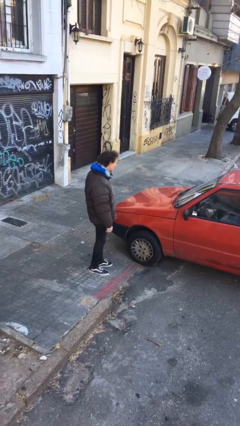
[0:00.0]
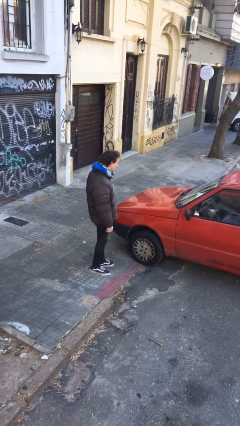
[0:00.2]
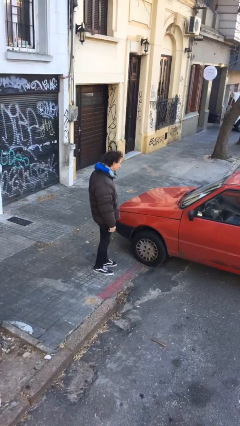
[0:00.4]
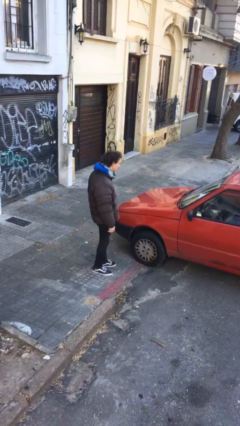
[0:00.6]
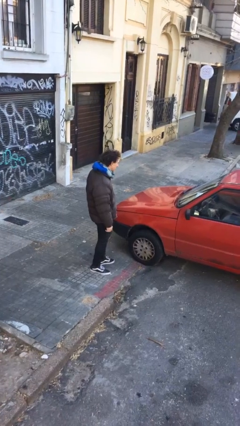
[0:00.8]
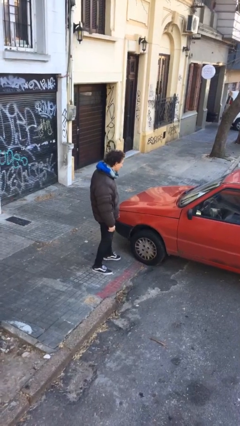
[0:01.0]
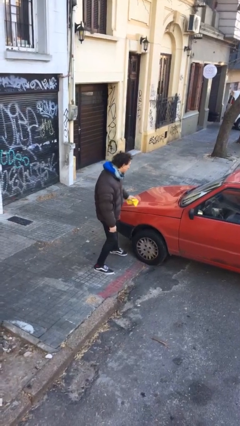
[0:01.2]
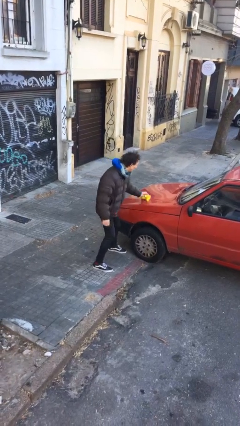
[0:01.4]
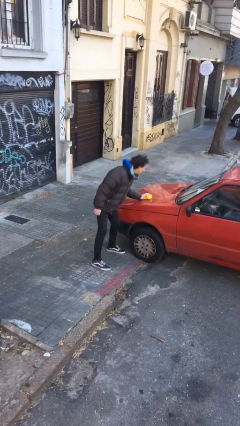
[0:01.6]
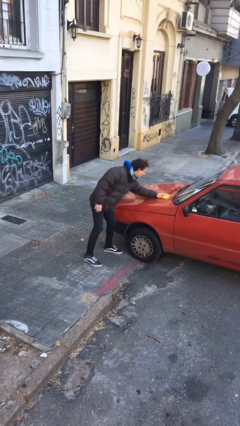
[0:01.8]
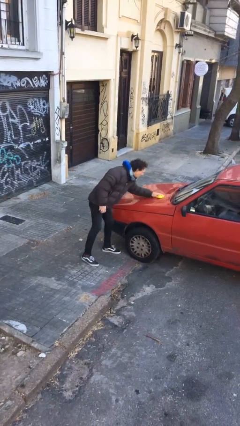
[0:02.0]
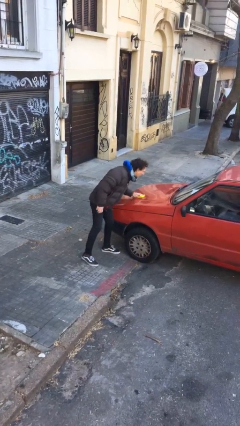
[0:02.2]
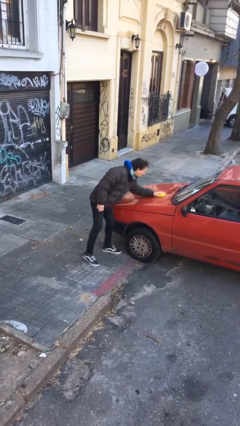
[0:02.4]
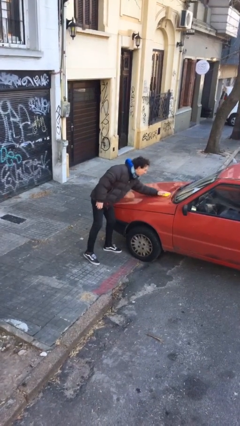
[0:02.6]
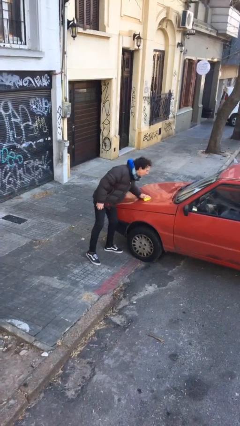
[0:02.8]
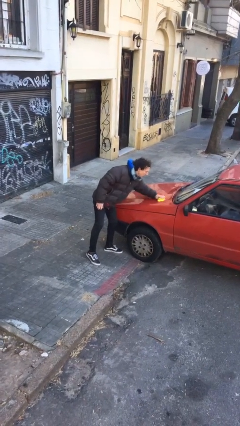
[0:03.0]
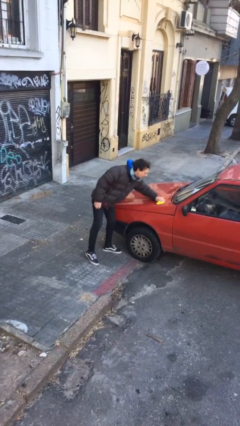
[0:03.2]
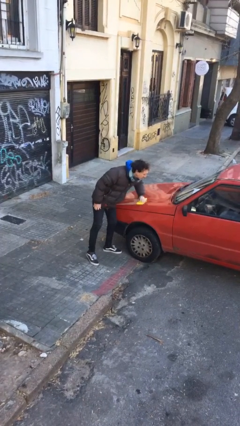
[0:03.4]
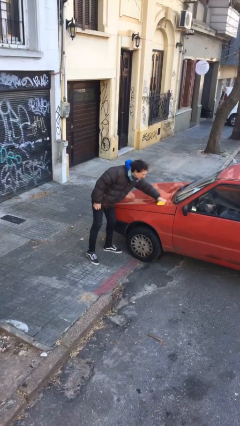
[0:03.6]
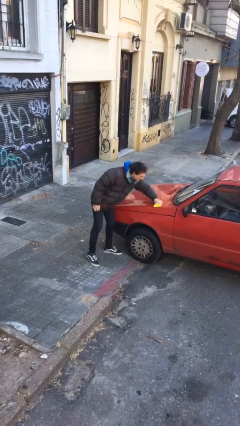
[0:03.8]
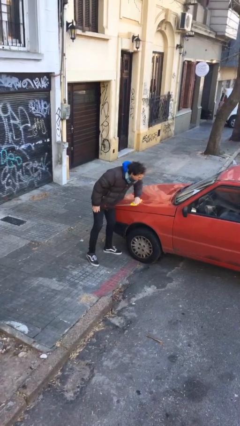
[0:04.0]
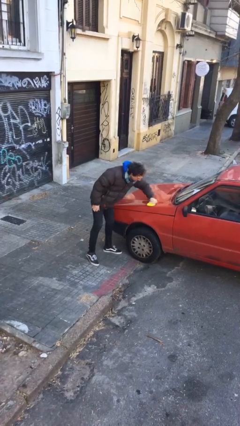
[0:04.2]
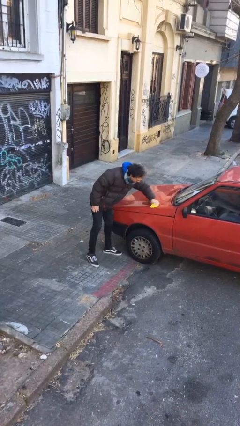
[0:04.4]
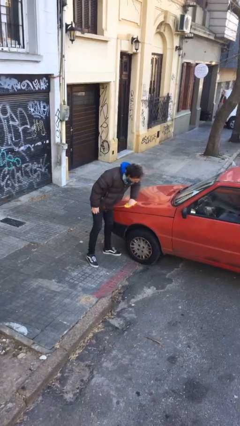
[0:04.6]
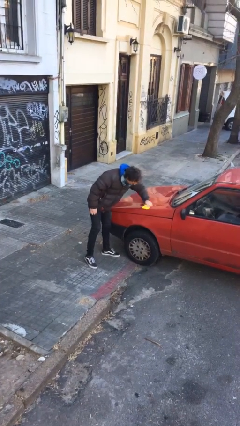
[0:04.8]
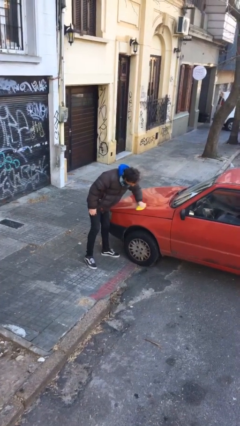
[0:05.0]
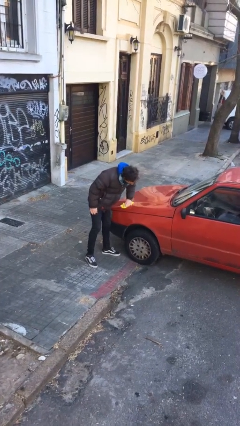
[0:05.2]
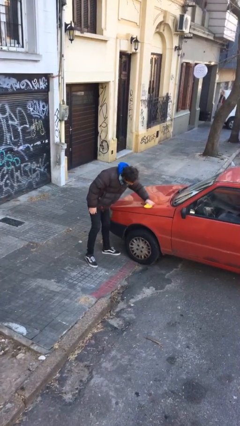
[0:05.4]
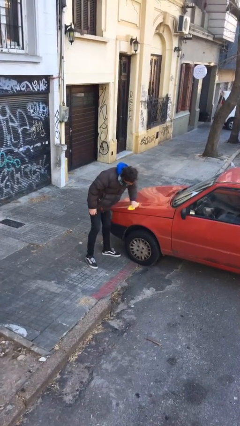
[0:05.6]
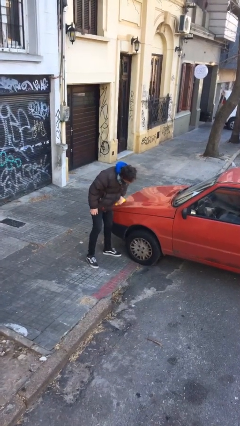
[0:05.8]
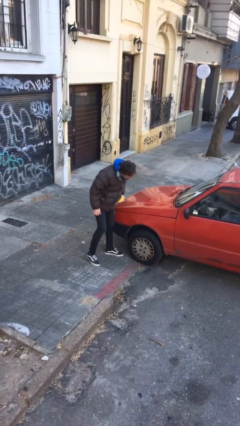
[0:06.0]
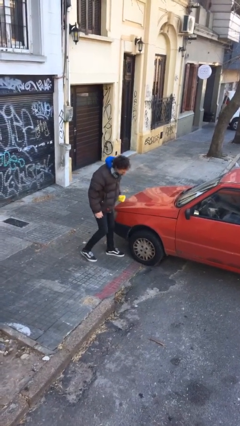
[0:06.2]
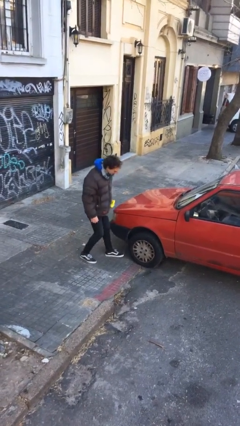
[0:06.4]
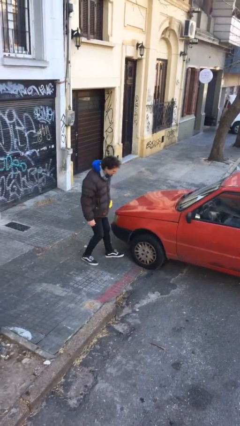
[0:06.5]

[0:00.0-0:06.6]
person polishes car with rag

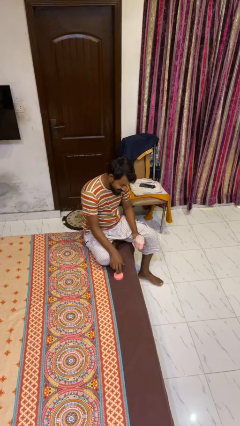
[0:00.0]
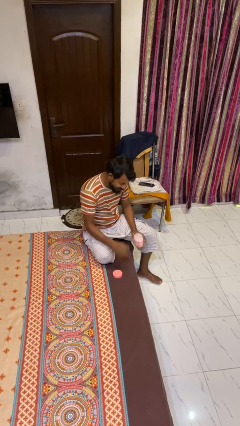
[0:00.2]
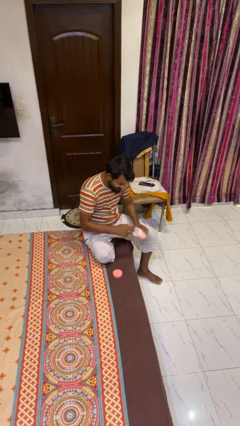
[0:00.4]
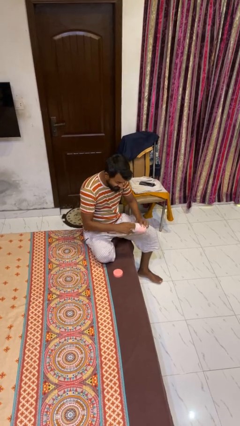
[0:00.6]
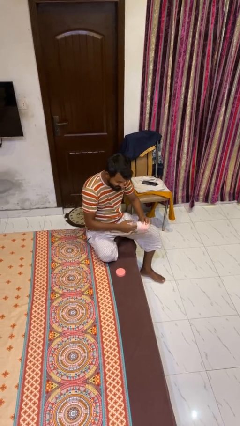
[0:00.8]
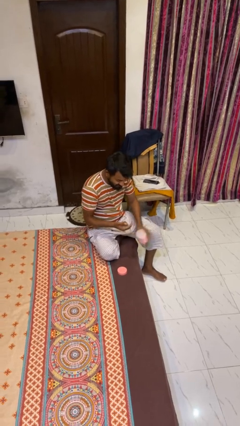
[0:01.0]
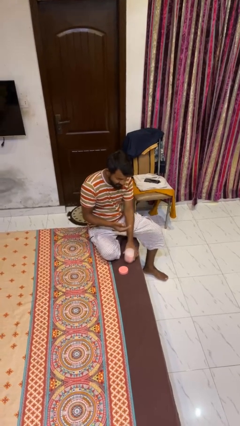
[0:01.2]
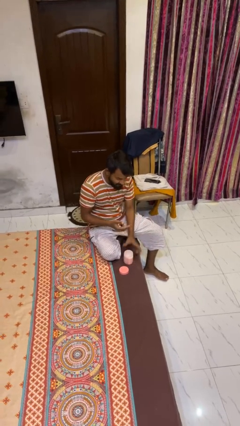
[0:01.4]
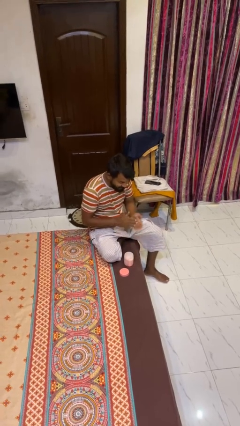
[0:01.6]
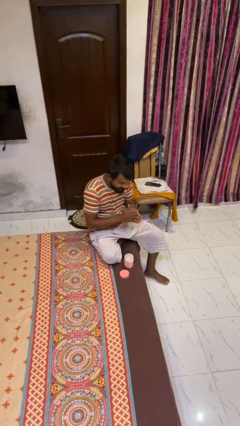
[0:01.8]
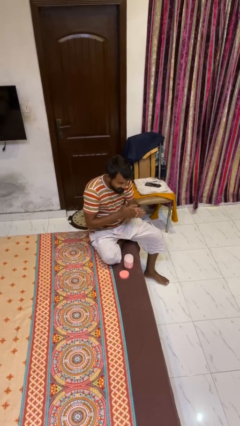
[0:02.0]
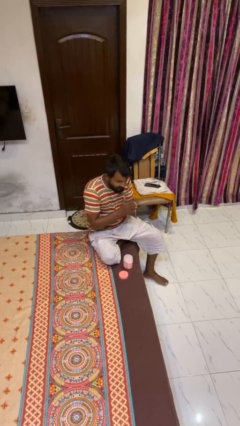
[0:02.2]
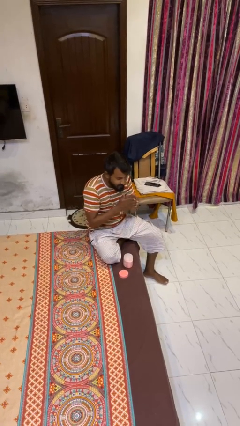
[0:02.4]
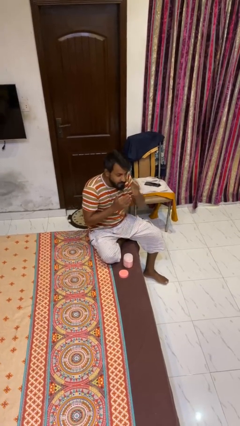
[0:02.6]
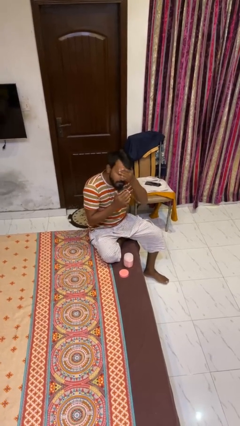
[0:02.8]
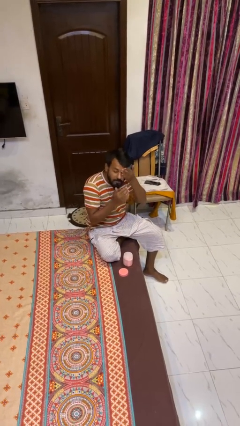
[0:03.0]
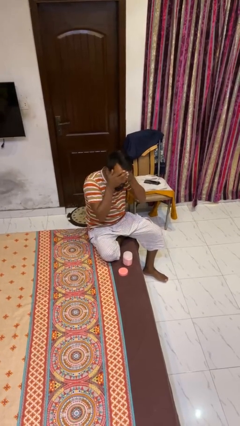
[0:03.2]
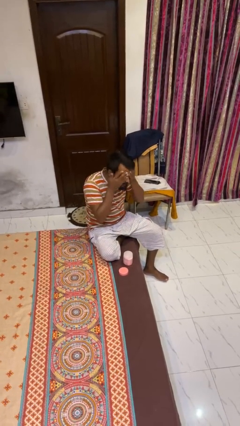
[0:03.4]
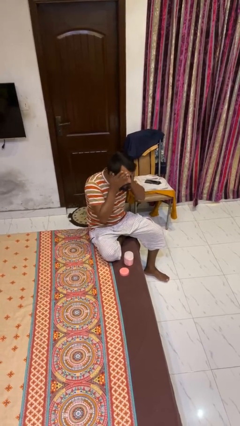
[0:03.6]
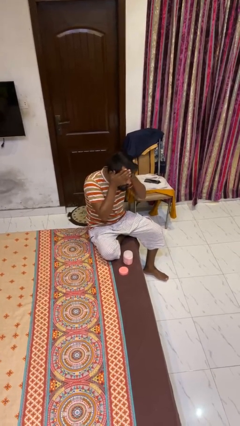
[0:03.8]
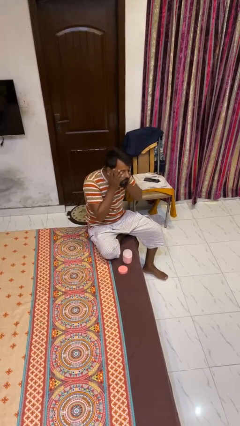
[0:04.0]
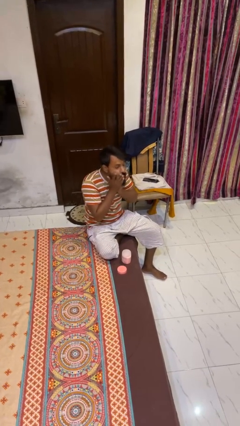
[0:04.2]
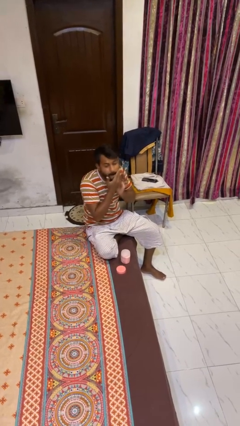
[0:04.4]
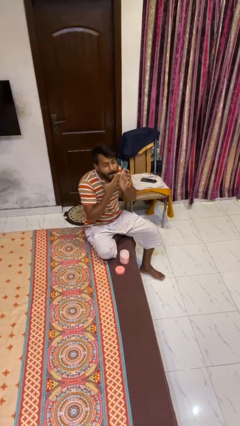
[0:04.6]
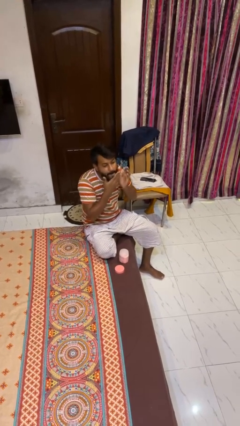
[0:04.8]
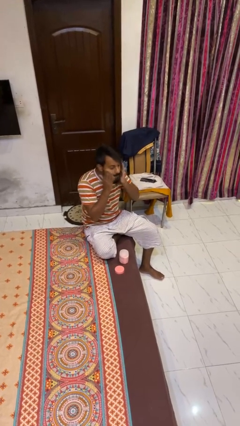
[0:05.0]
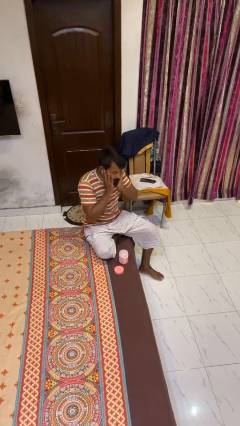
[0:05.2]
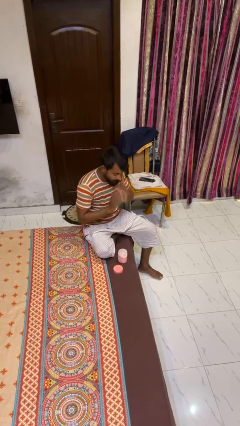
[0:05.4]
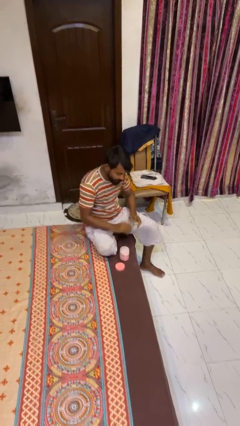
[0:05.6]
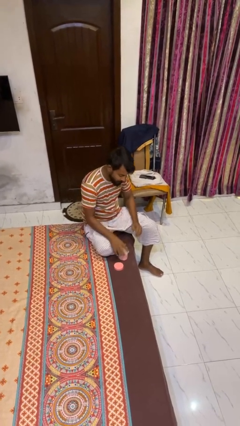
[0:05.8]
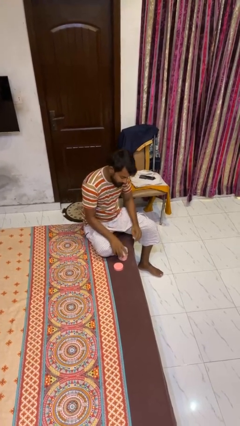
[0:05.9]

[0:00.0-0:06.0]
person applies facial moisturizer

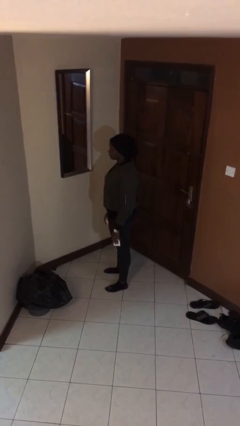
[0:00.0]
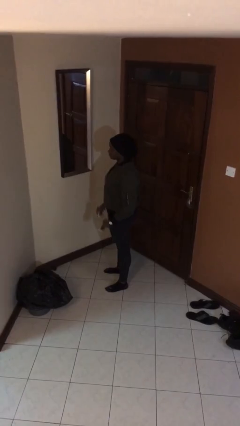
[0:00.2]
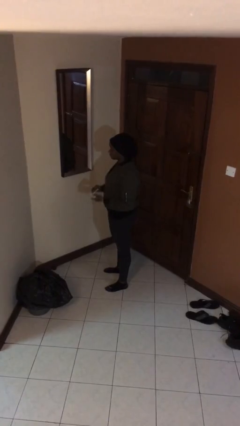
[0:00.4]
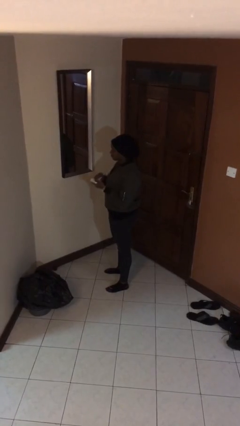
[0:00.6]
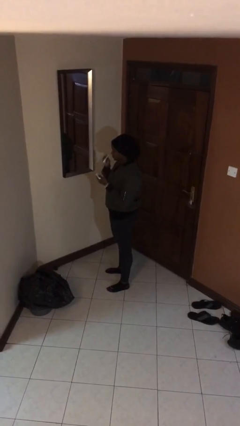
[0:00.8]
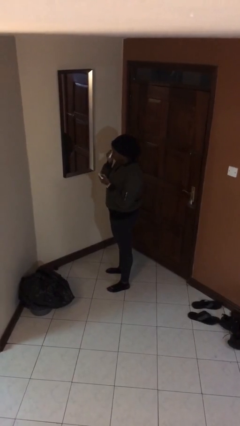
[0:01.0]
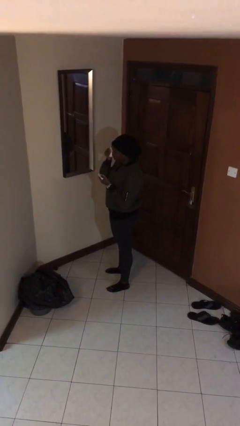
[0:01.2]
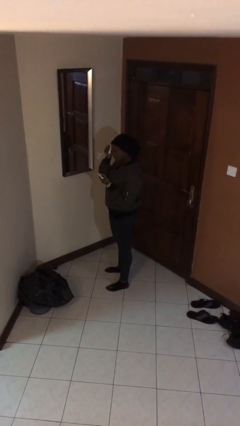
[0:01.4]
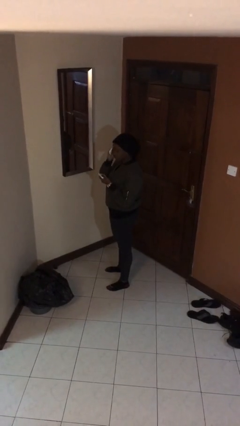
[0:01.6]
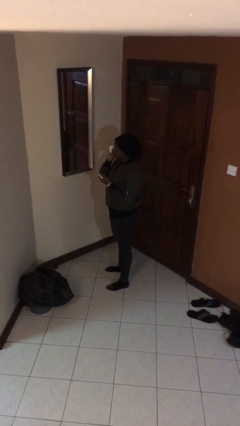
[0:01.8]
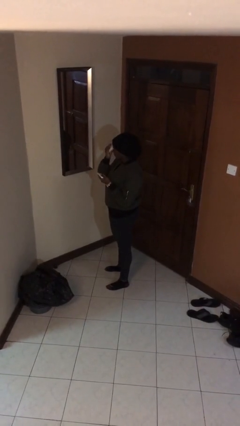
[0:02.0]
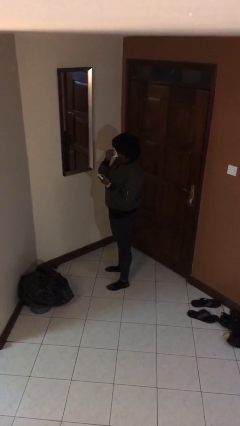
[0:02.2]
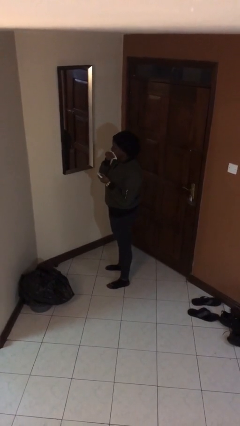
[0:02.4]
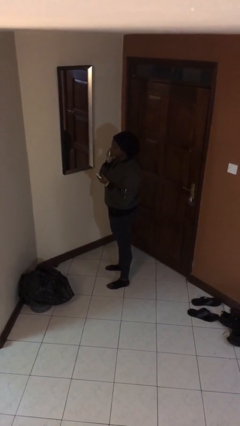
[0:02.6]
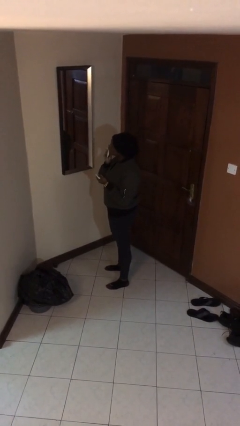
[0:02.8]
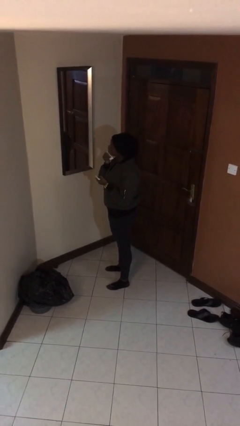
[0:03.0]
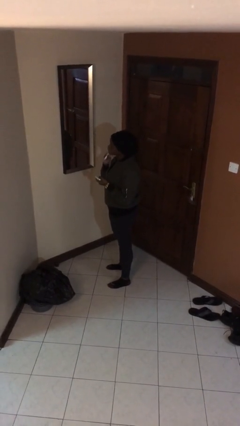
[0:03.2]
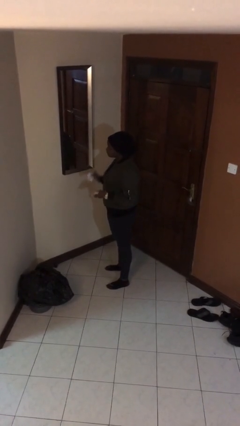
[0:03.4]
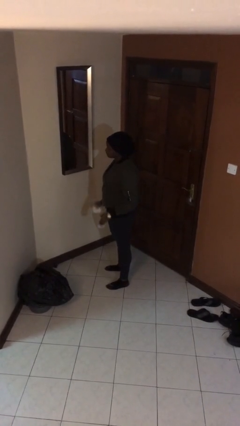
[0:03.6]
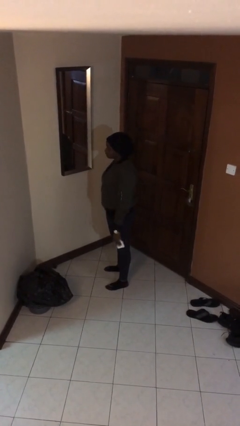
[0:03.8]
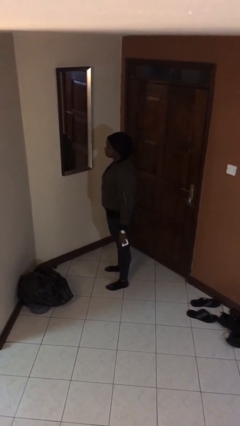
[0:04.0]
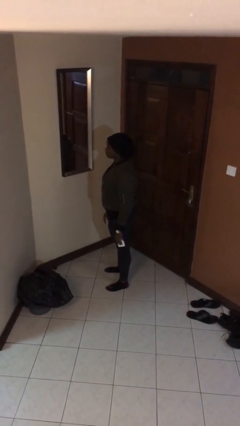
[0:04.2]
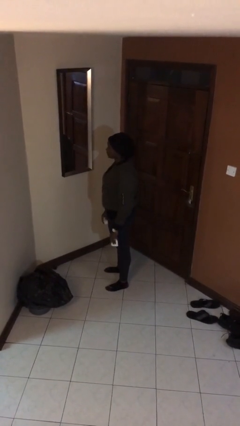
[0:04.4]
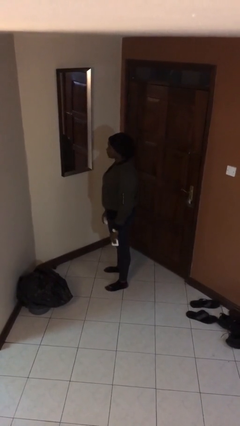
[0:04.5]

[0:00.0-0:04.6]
person applies foundation makeup

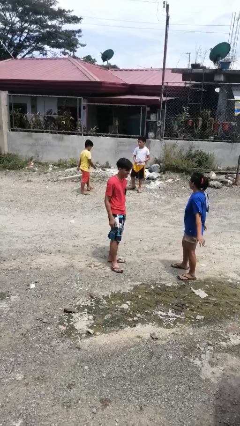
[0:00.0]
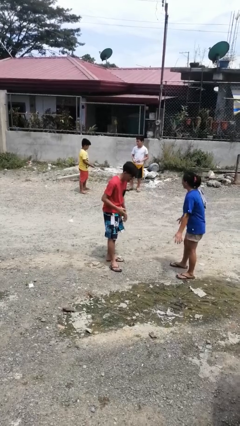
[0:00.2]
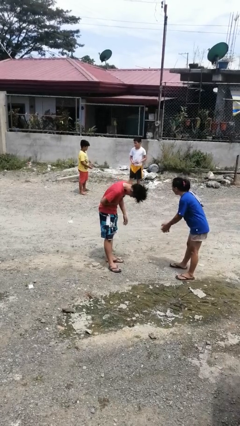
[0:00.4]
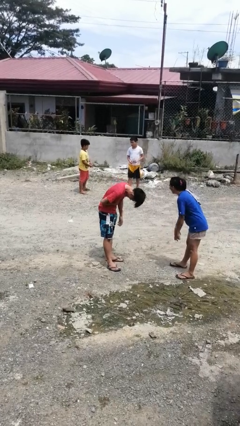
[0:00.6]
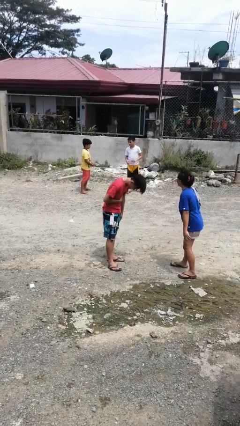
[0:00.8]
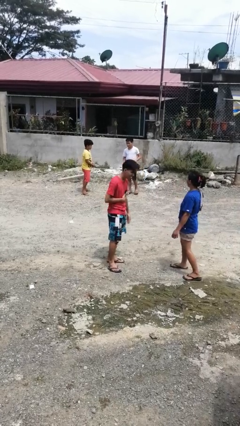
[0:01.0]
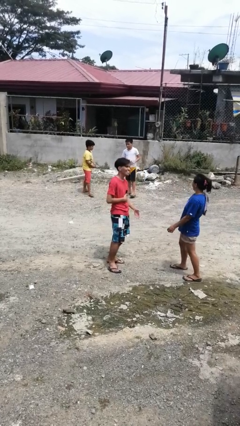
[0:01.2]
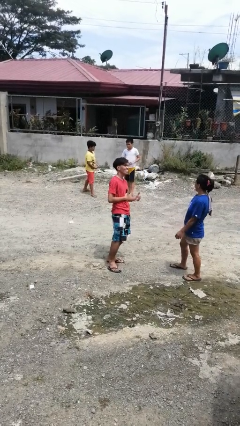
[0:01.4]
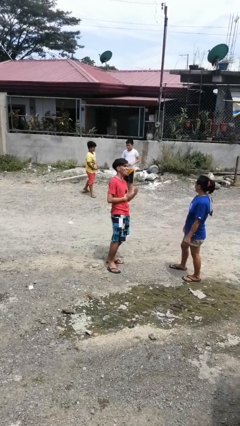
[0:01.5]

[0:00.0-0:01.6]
person laughs with person
